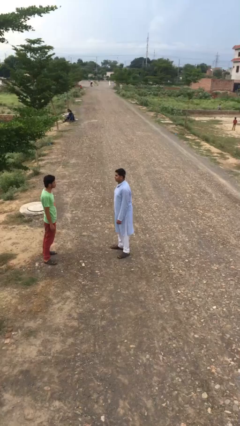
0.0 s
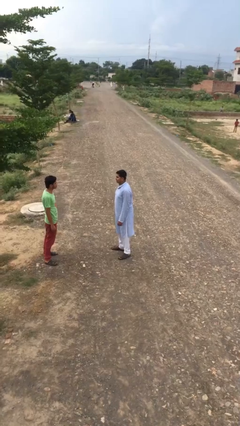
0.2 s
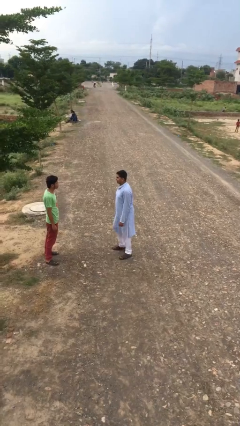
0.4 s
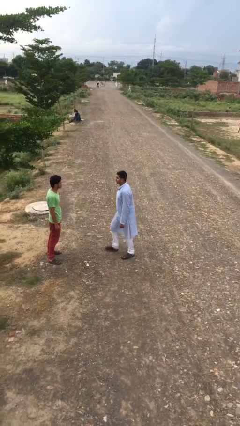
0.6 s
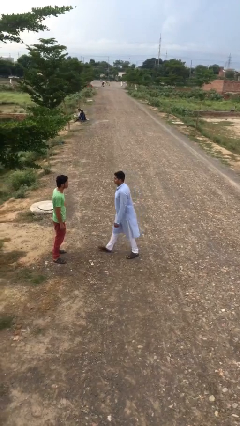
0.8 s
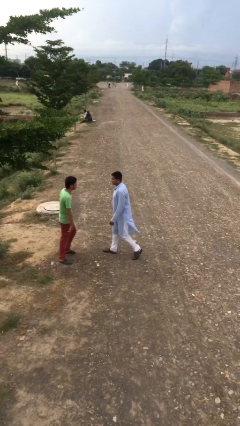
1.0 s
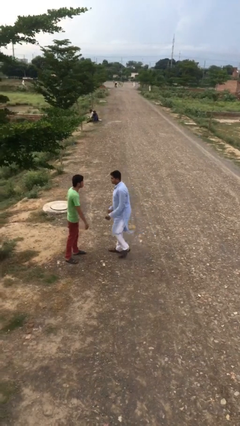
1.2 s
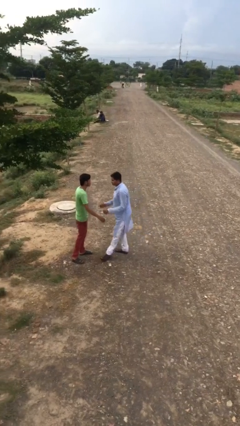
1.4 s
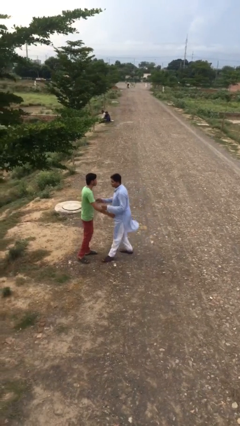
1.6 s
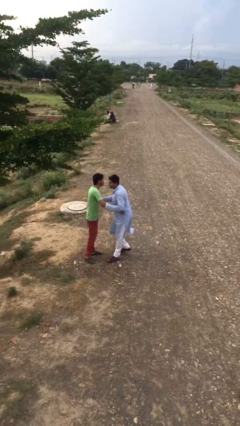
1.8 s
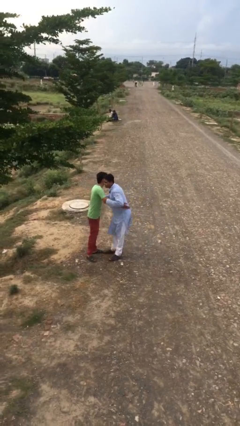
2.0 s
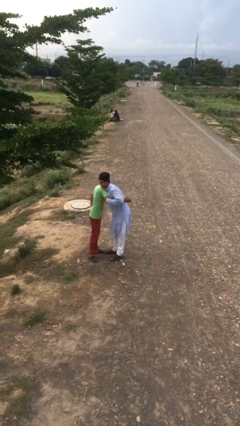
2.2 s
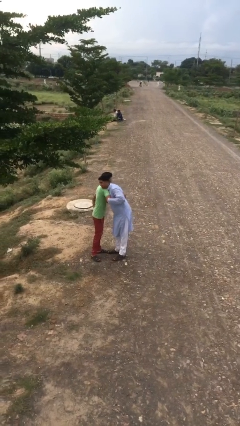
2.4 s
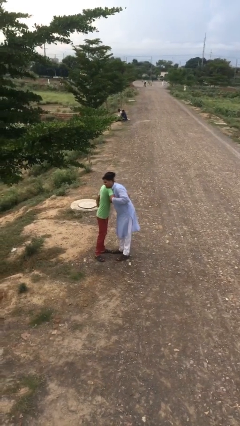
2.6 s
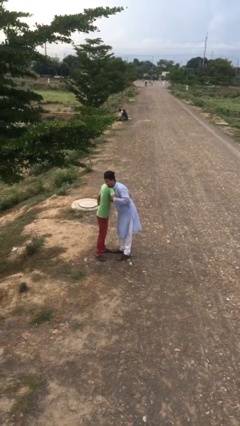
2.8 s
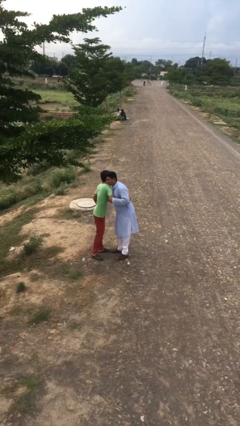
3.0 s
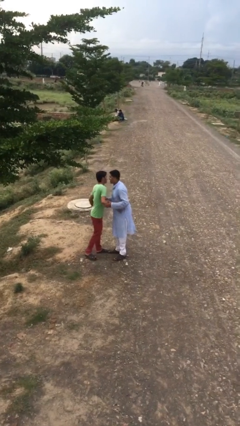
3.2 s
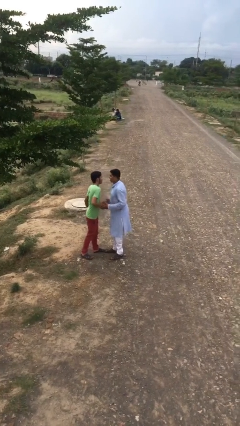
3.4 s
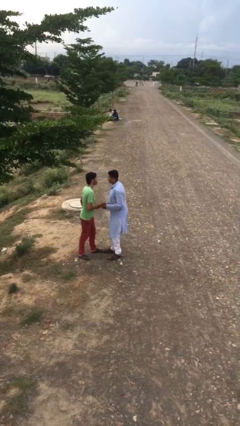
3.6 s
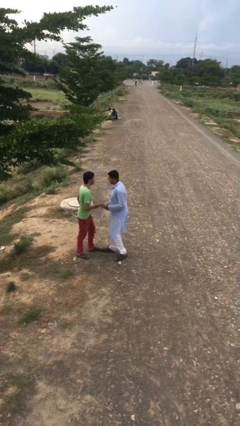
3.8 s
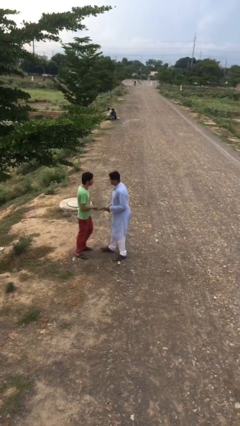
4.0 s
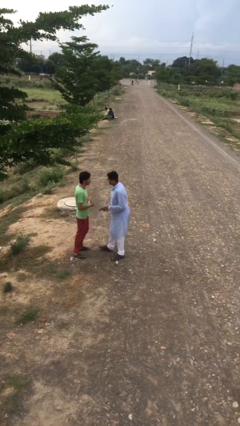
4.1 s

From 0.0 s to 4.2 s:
person embraces person

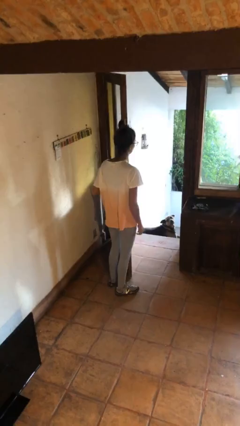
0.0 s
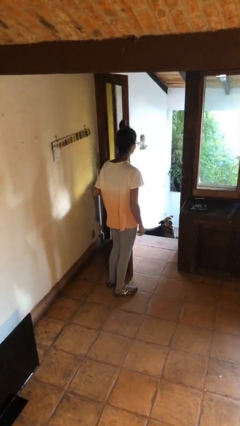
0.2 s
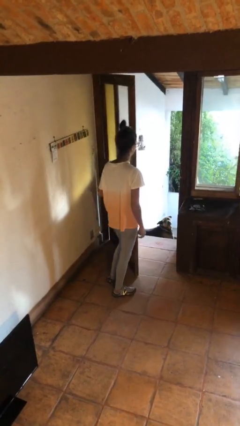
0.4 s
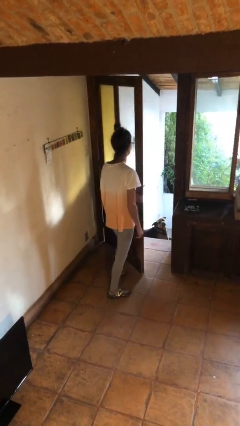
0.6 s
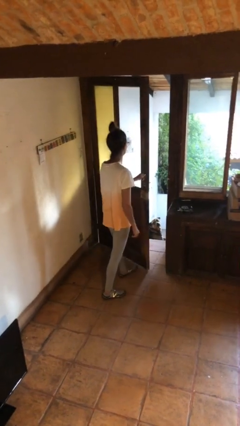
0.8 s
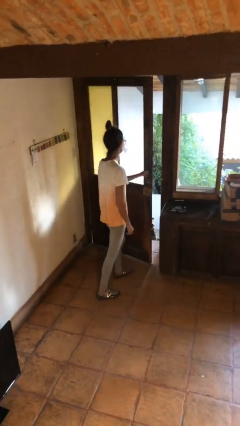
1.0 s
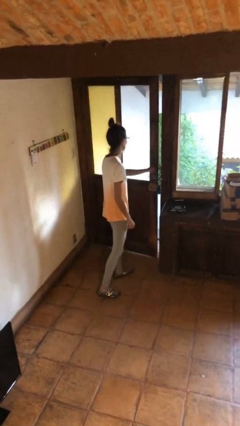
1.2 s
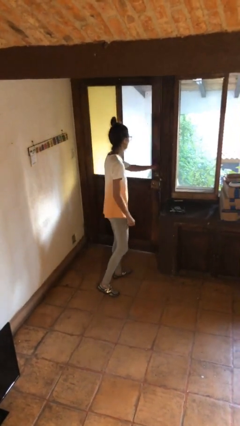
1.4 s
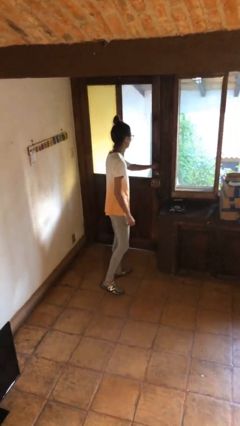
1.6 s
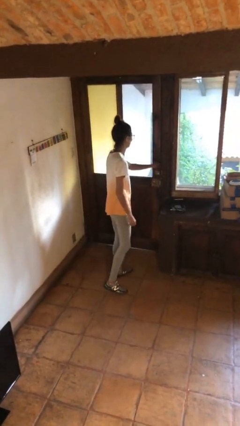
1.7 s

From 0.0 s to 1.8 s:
person closes facility door

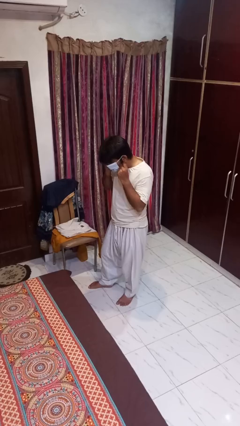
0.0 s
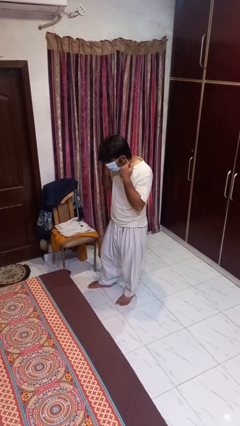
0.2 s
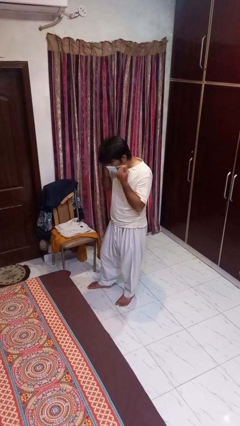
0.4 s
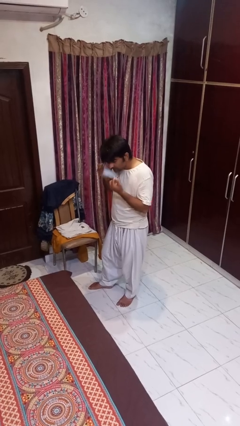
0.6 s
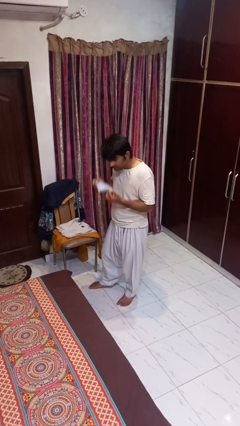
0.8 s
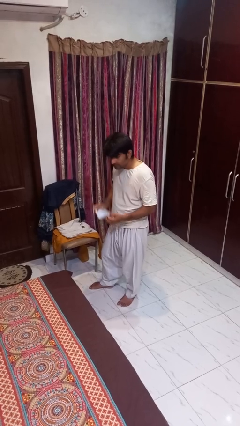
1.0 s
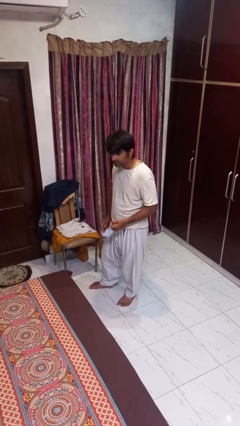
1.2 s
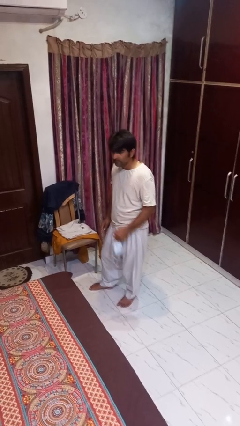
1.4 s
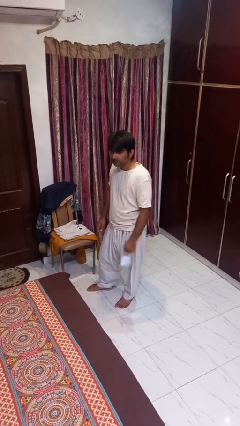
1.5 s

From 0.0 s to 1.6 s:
person takes off facemask

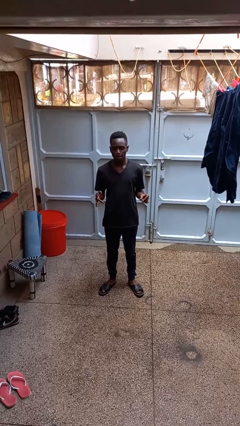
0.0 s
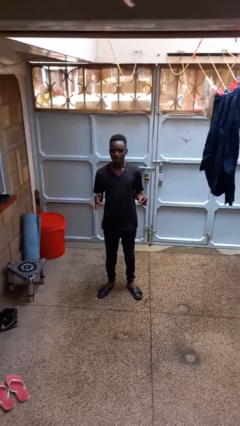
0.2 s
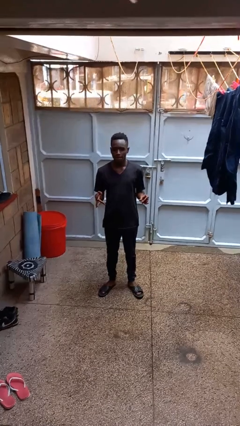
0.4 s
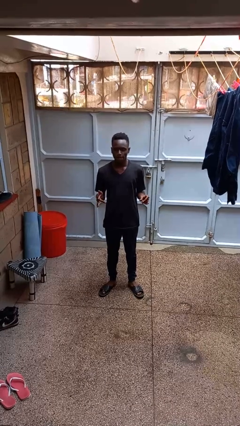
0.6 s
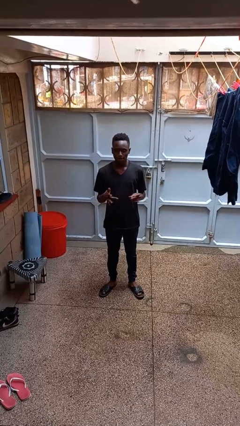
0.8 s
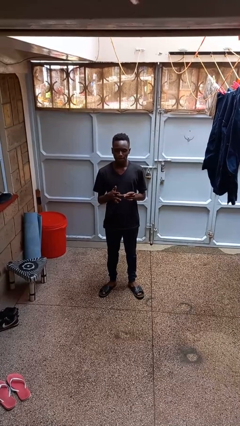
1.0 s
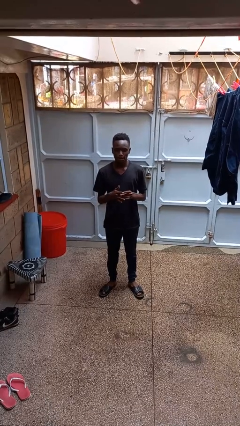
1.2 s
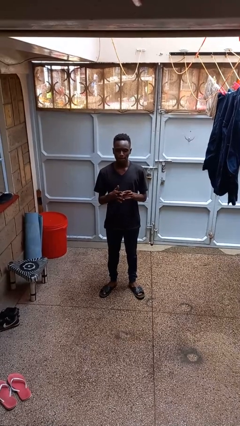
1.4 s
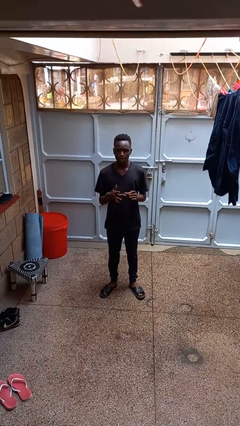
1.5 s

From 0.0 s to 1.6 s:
person puts on ring

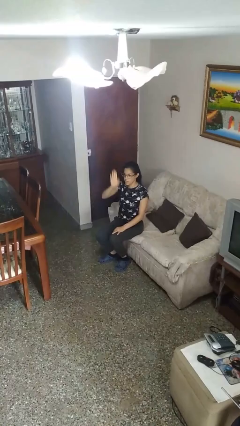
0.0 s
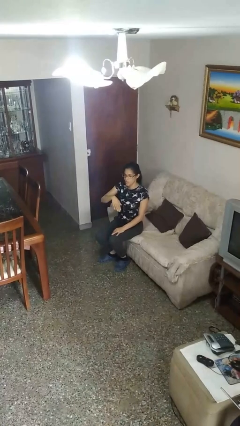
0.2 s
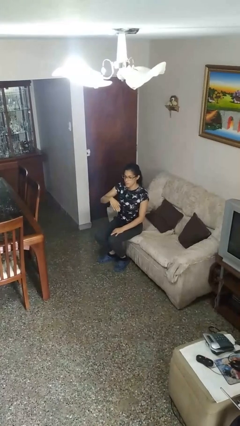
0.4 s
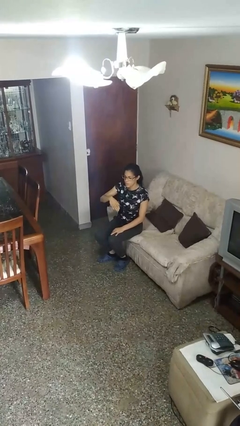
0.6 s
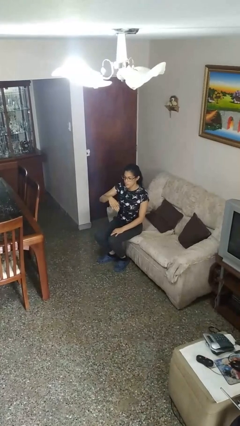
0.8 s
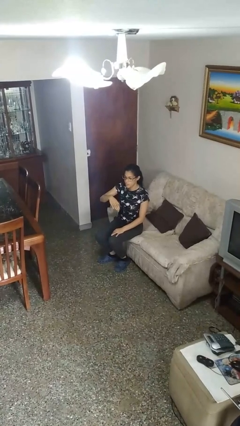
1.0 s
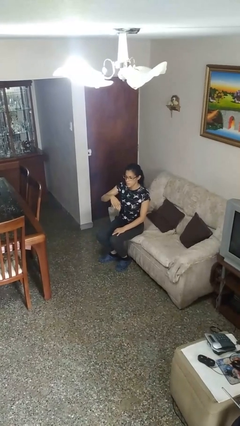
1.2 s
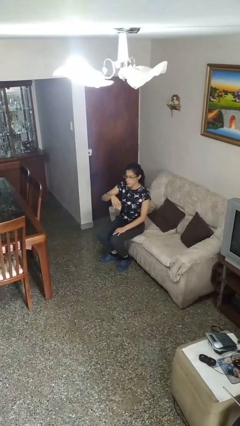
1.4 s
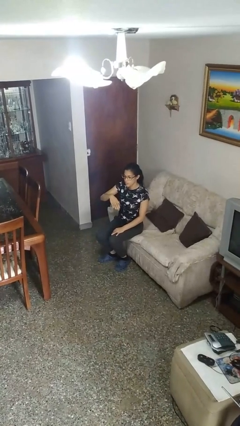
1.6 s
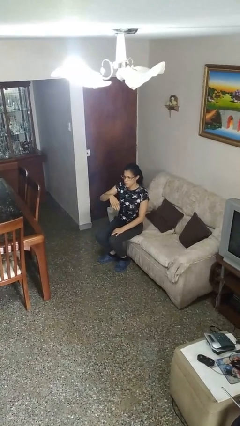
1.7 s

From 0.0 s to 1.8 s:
person gestures swipe down

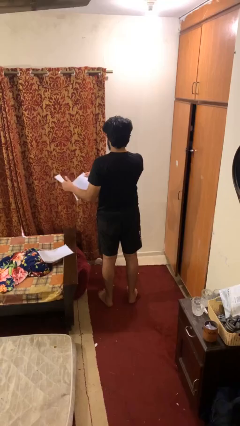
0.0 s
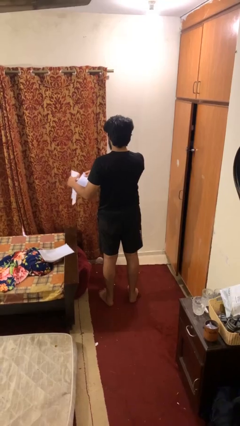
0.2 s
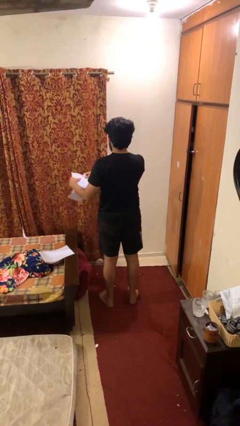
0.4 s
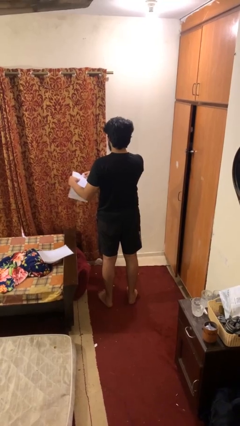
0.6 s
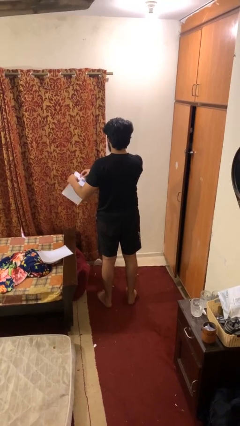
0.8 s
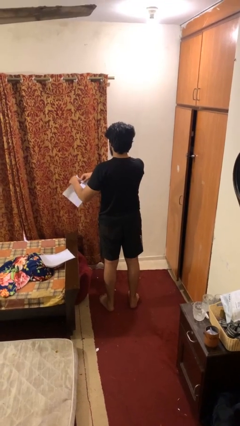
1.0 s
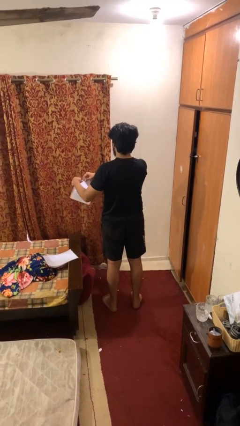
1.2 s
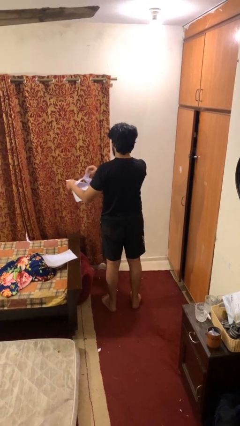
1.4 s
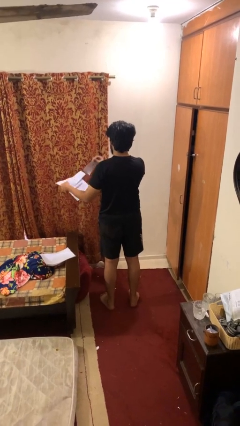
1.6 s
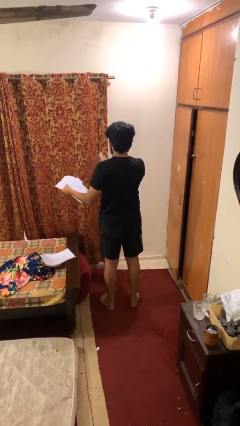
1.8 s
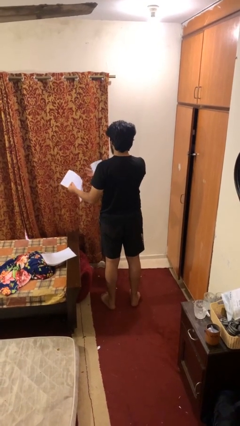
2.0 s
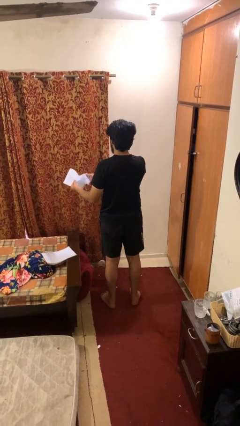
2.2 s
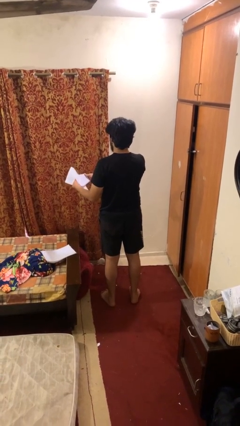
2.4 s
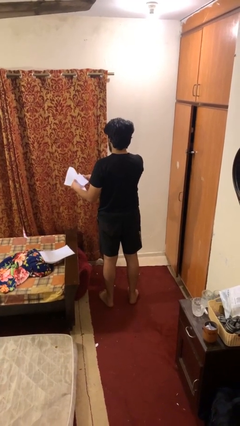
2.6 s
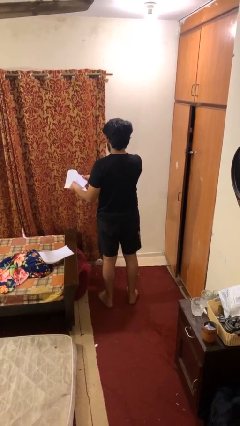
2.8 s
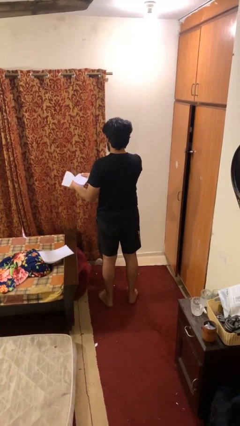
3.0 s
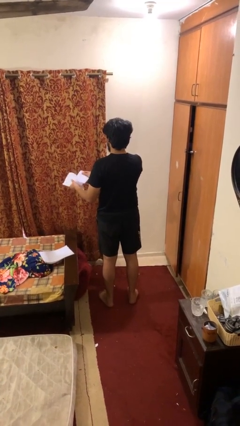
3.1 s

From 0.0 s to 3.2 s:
person tears paper

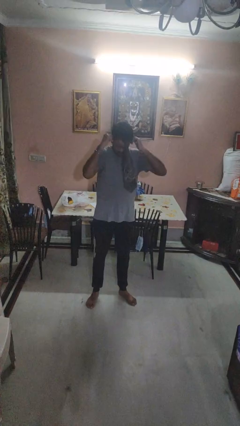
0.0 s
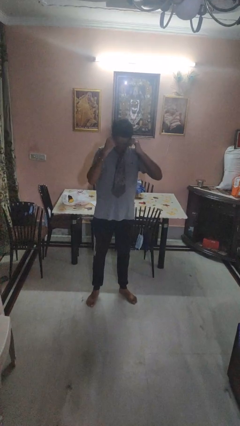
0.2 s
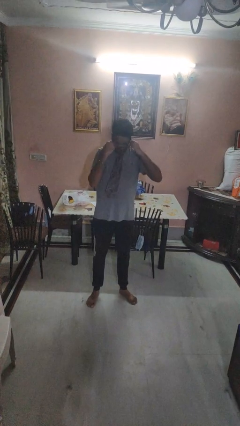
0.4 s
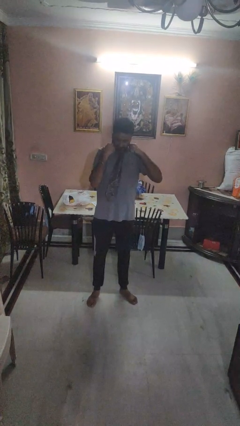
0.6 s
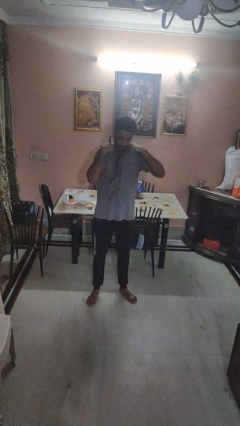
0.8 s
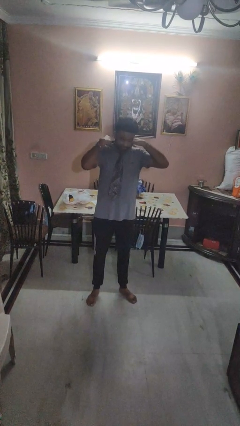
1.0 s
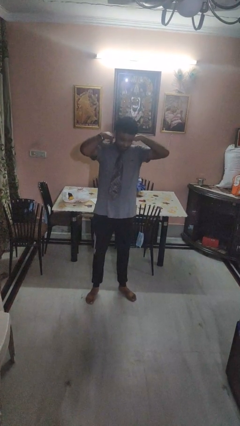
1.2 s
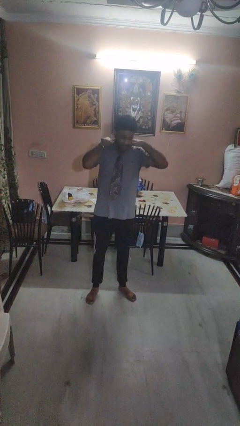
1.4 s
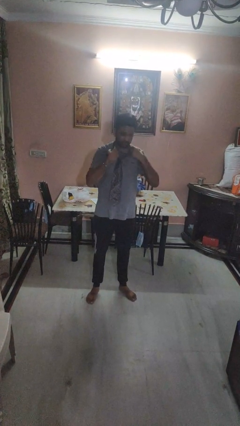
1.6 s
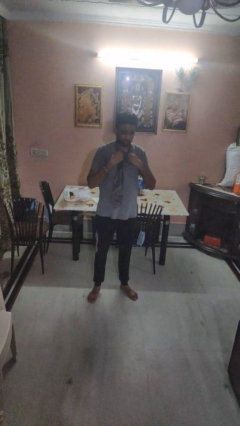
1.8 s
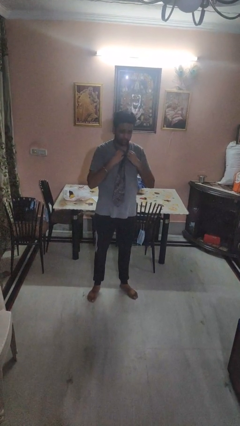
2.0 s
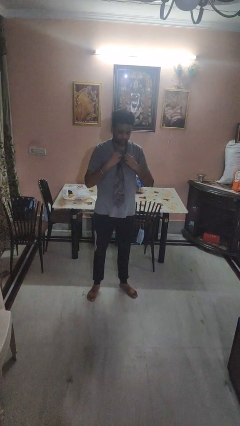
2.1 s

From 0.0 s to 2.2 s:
person puts on necktie

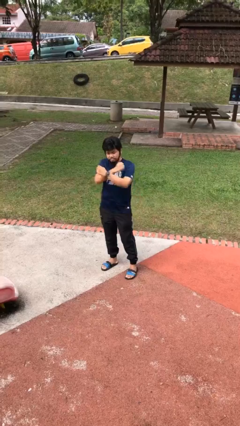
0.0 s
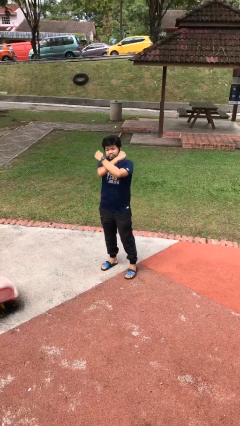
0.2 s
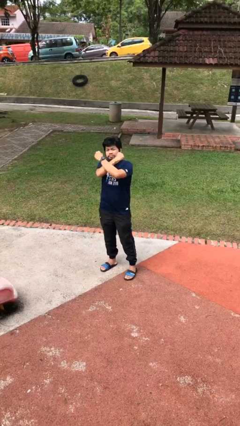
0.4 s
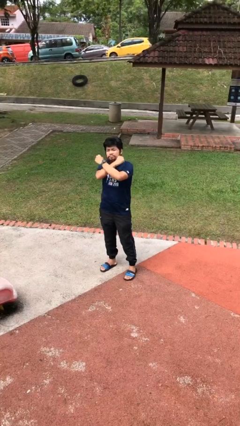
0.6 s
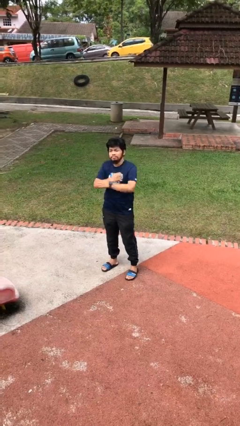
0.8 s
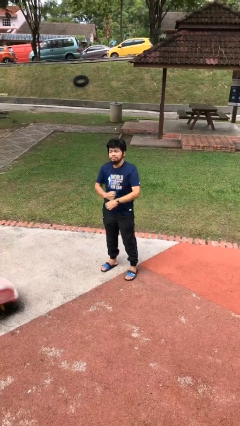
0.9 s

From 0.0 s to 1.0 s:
person gestures arms x
